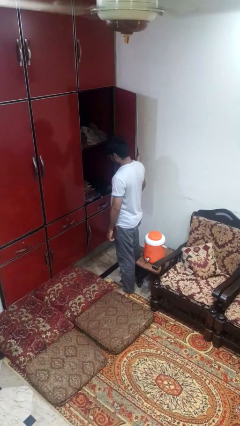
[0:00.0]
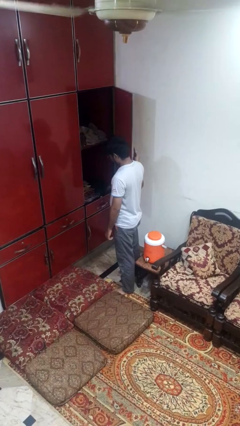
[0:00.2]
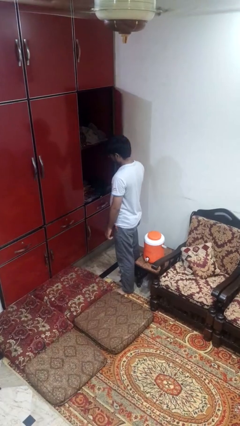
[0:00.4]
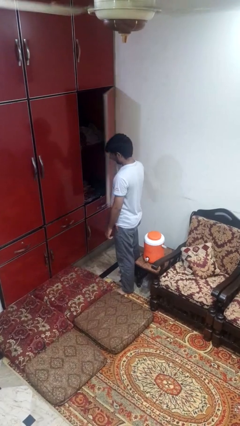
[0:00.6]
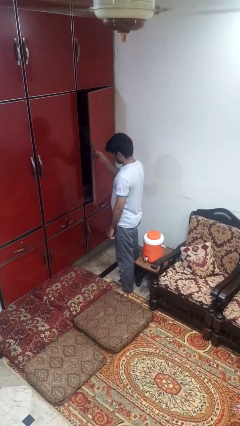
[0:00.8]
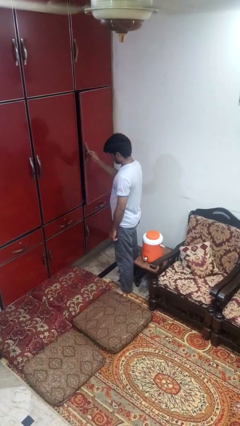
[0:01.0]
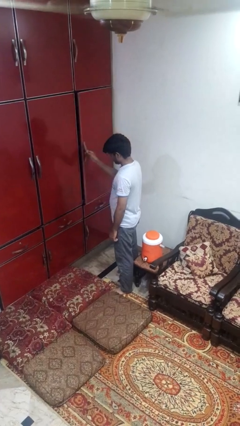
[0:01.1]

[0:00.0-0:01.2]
person closes cabinet

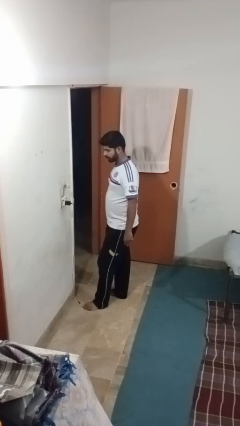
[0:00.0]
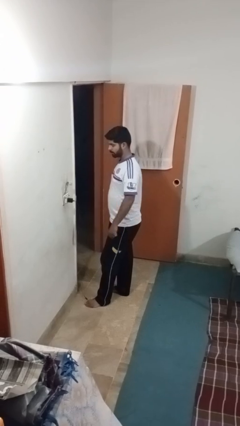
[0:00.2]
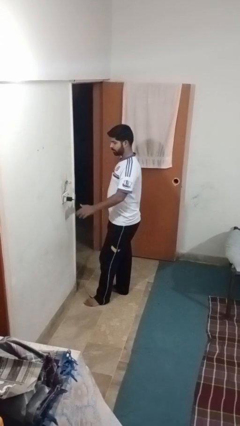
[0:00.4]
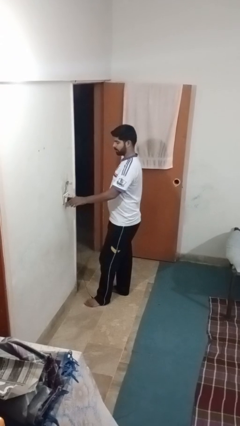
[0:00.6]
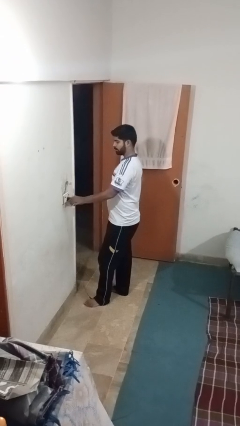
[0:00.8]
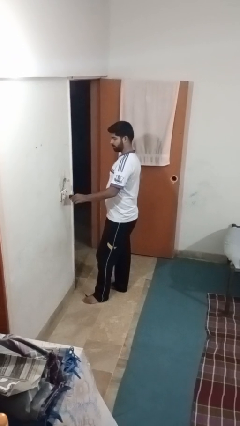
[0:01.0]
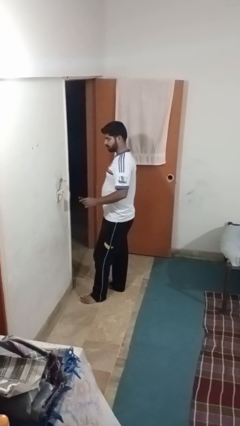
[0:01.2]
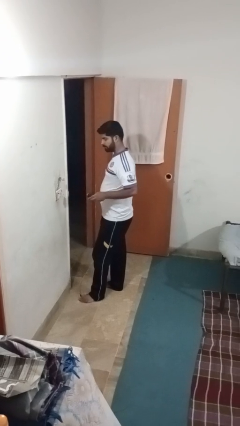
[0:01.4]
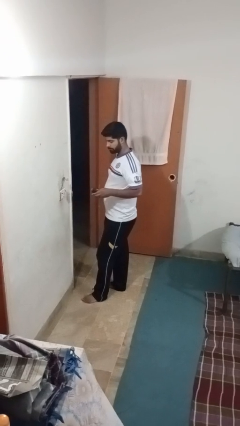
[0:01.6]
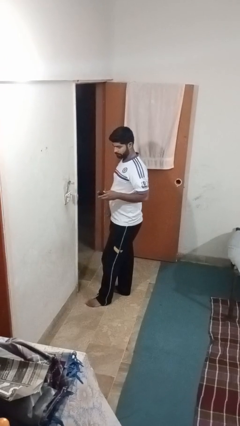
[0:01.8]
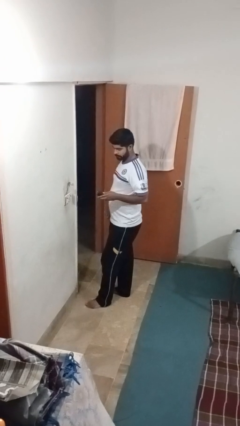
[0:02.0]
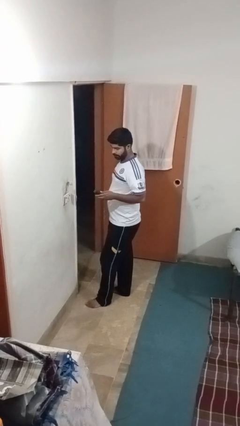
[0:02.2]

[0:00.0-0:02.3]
person unplugs from electrical socket

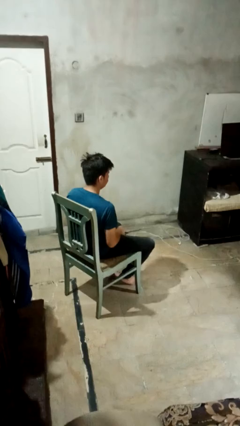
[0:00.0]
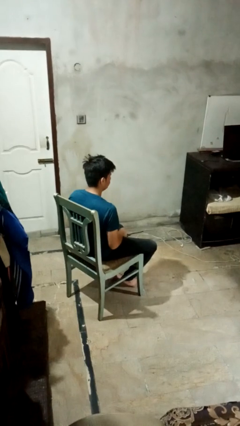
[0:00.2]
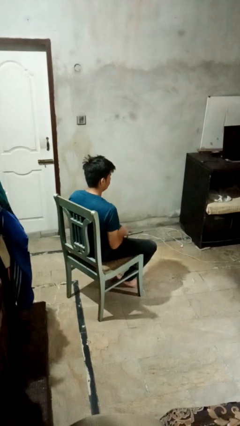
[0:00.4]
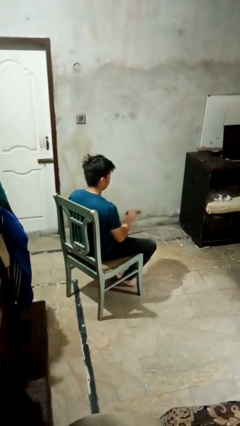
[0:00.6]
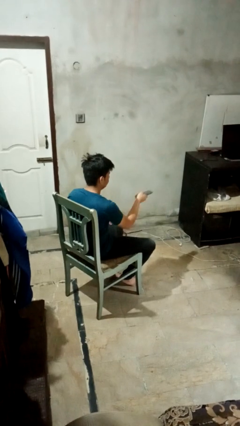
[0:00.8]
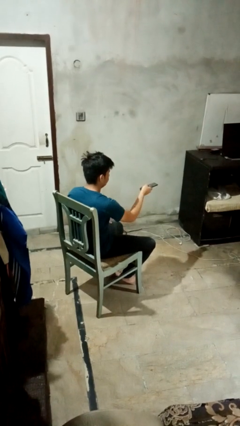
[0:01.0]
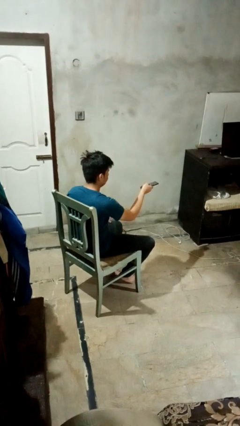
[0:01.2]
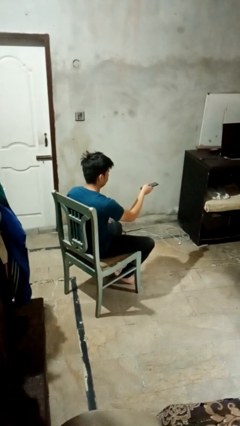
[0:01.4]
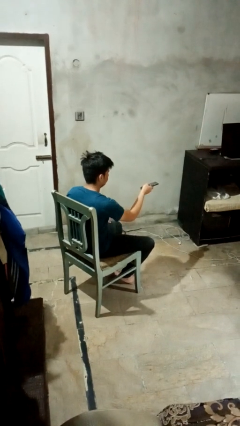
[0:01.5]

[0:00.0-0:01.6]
person uses television remote

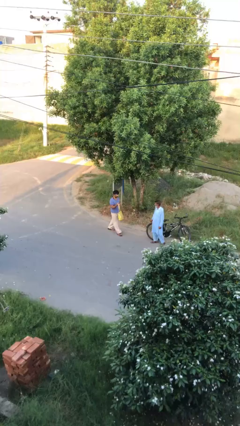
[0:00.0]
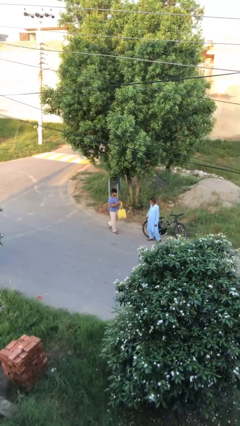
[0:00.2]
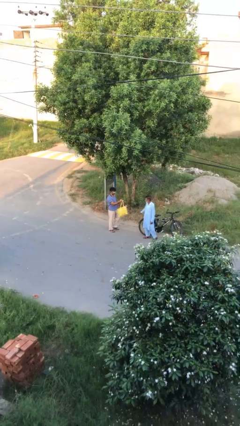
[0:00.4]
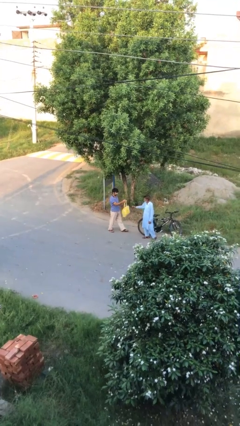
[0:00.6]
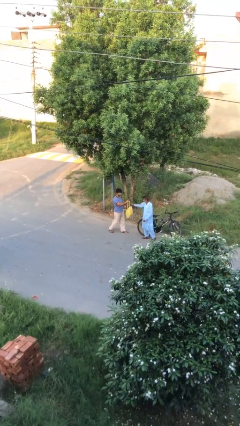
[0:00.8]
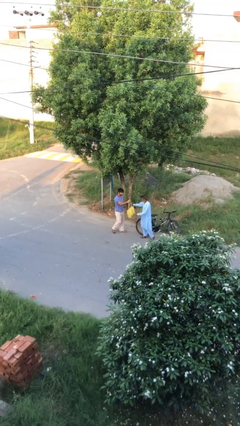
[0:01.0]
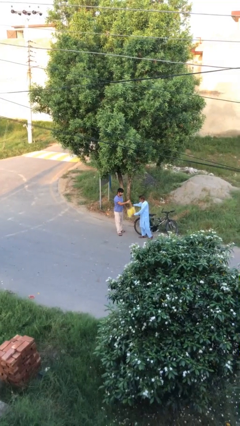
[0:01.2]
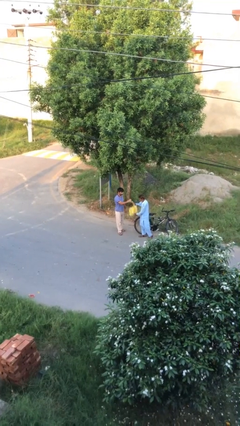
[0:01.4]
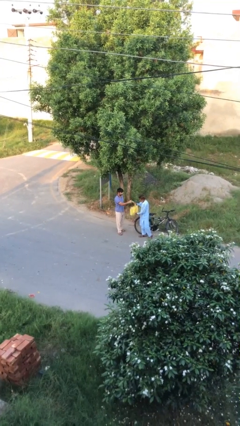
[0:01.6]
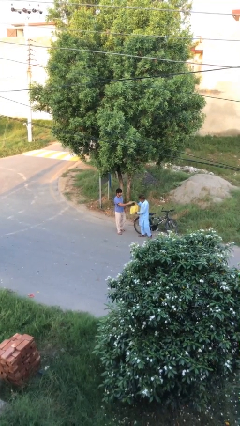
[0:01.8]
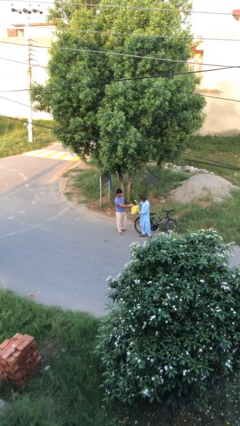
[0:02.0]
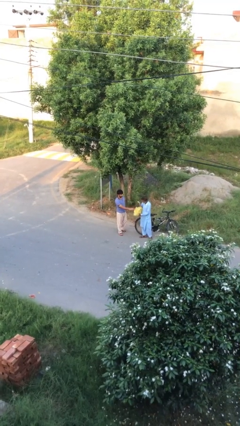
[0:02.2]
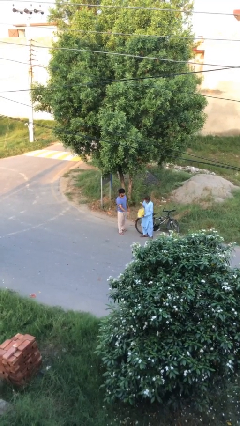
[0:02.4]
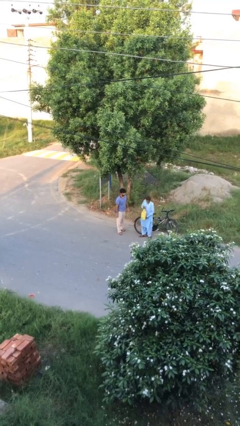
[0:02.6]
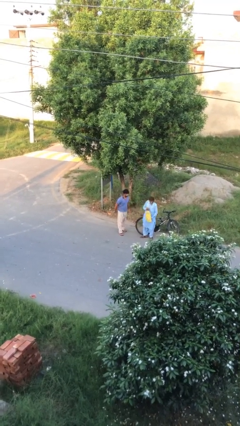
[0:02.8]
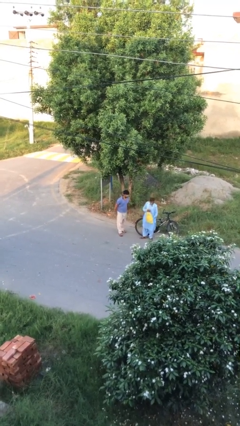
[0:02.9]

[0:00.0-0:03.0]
person transfers object to person

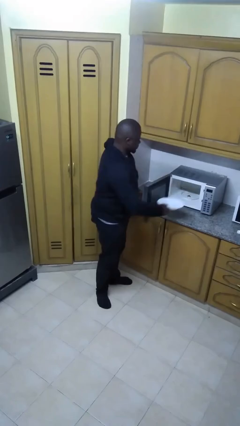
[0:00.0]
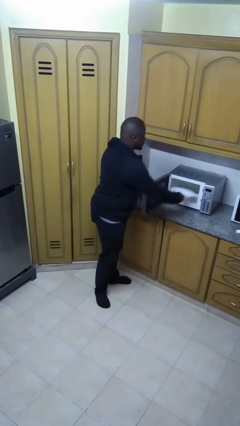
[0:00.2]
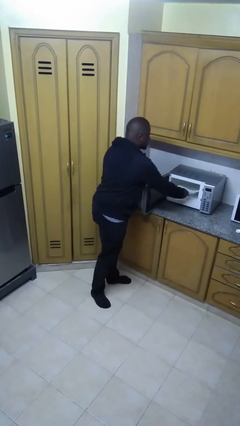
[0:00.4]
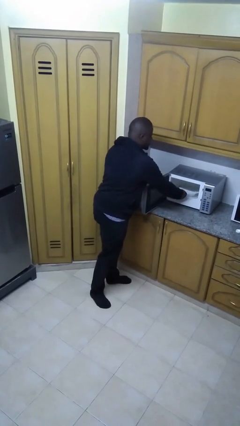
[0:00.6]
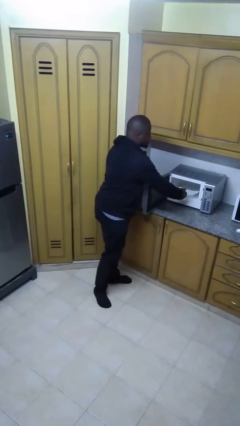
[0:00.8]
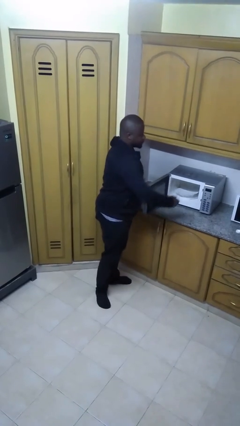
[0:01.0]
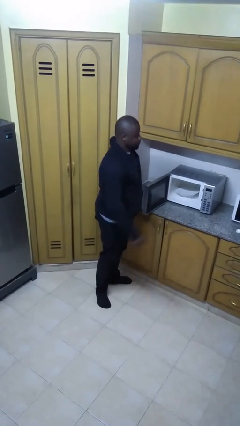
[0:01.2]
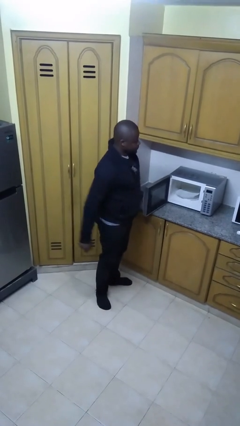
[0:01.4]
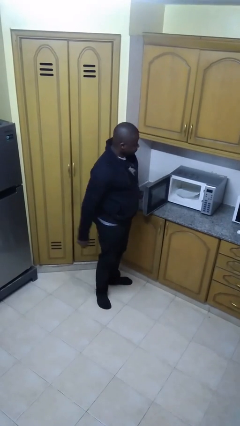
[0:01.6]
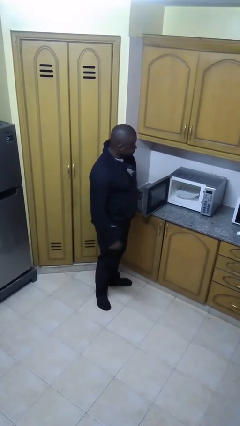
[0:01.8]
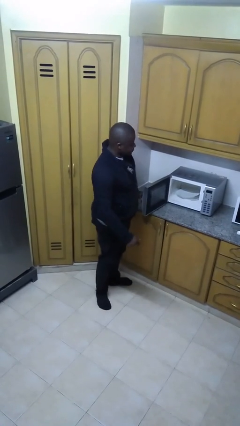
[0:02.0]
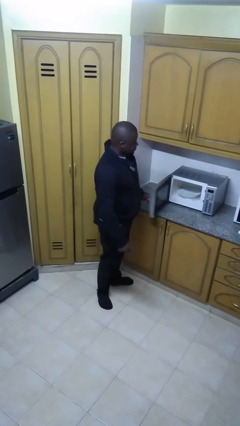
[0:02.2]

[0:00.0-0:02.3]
person puts object into microwave

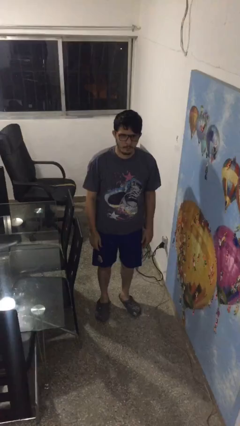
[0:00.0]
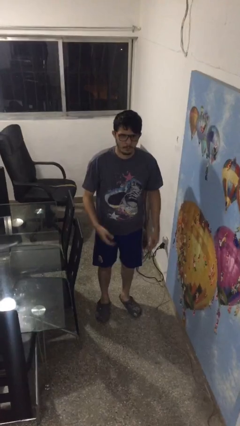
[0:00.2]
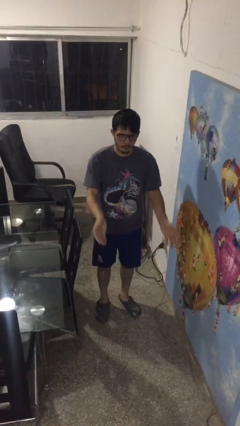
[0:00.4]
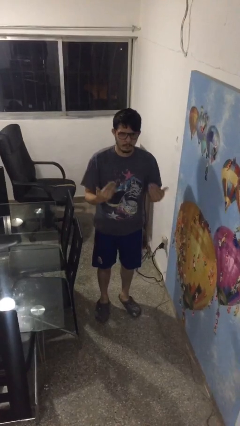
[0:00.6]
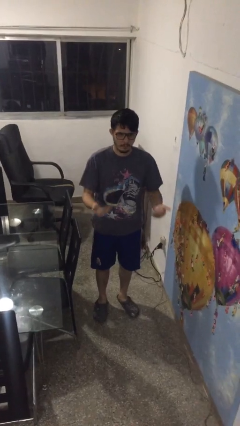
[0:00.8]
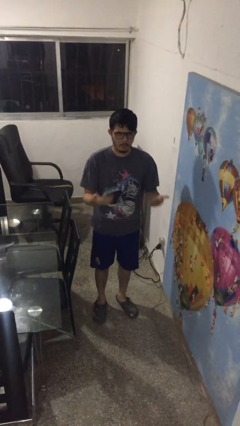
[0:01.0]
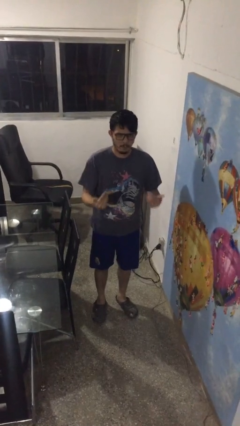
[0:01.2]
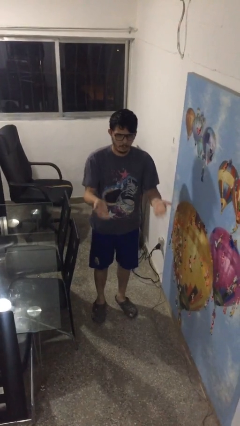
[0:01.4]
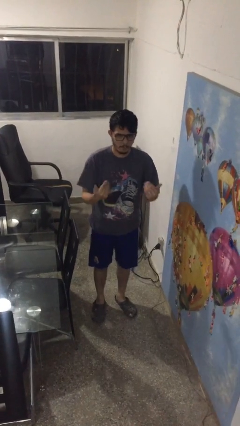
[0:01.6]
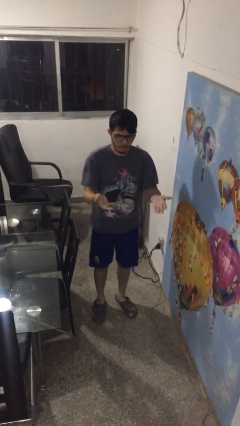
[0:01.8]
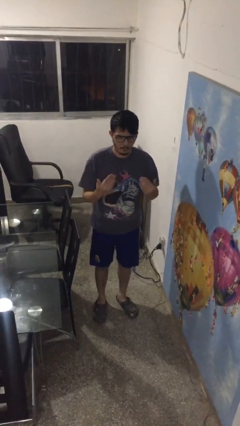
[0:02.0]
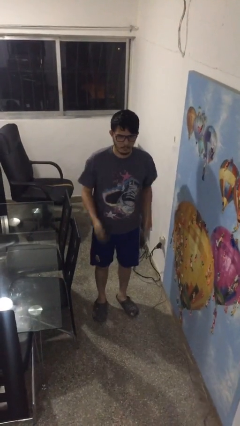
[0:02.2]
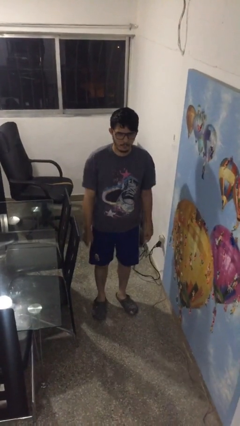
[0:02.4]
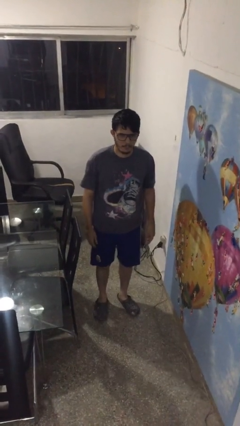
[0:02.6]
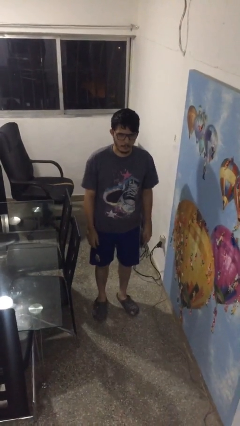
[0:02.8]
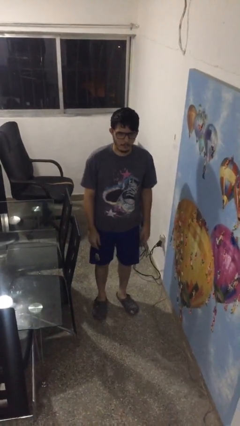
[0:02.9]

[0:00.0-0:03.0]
person gestures come here

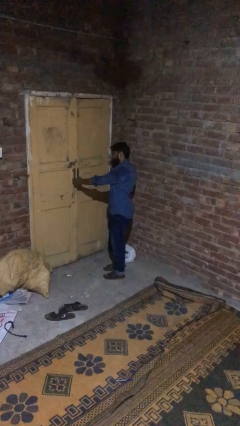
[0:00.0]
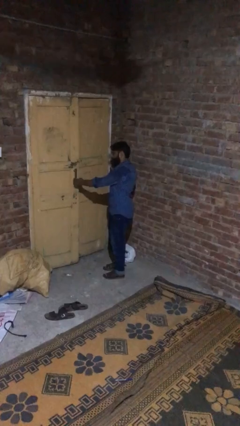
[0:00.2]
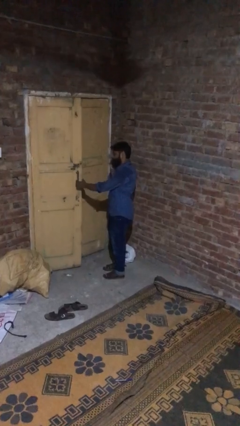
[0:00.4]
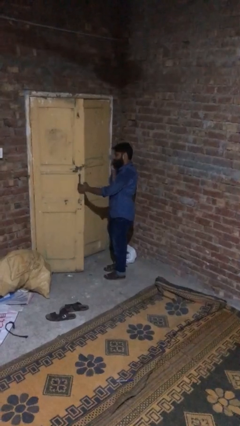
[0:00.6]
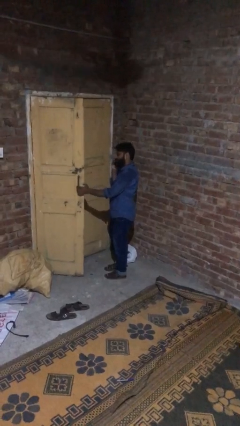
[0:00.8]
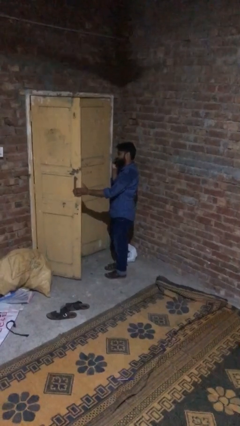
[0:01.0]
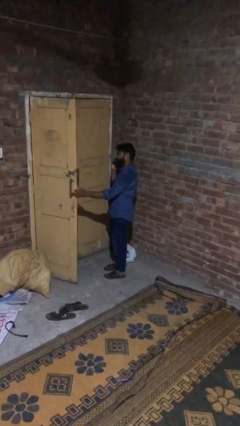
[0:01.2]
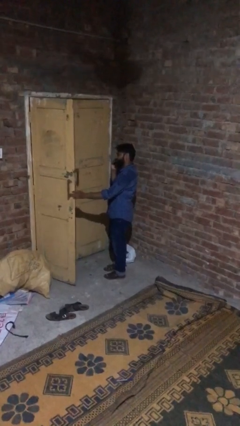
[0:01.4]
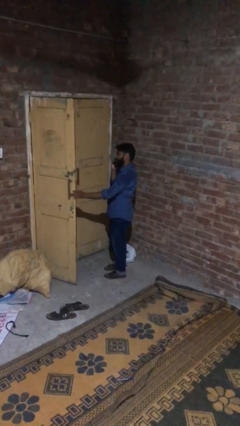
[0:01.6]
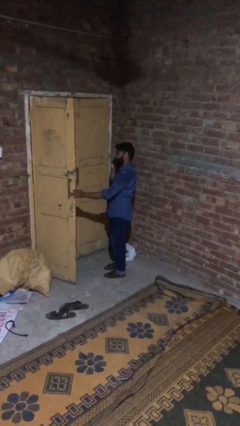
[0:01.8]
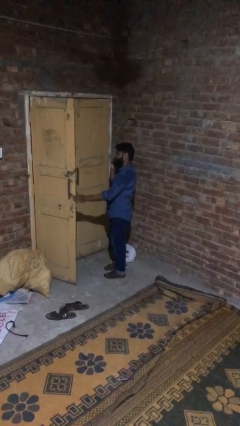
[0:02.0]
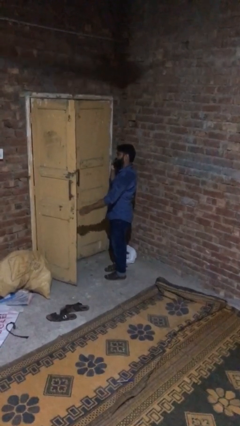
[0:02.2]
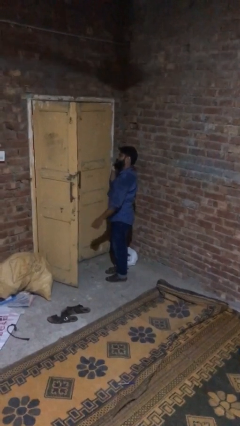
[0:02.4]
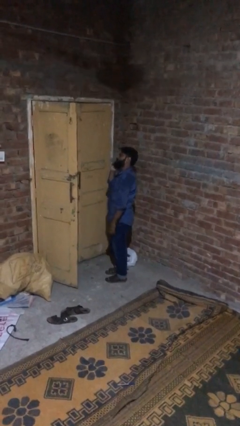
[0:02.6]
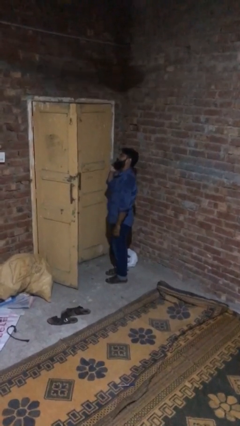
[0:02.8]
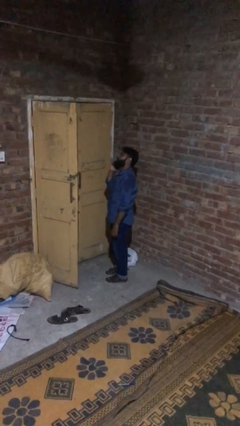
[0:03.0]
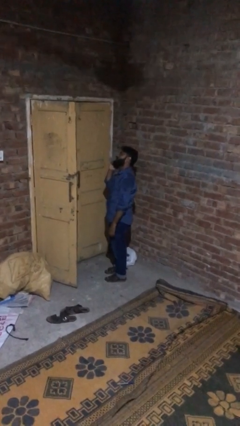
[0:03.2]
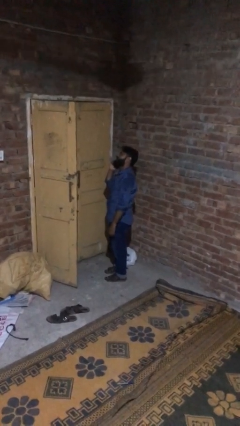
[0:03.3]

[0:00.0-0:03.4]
person opens facility door

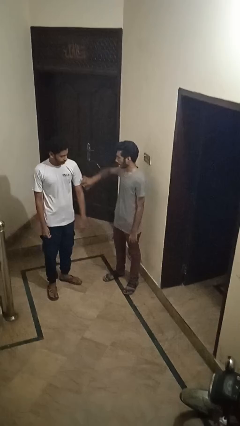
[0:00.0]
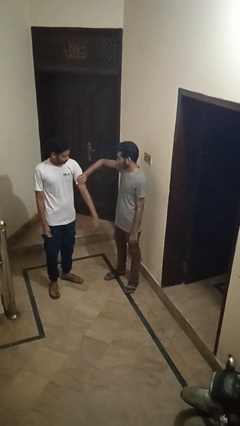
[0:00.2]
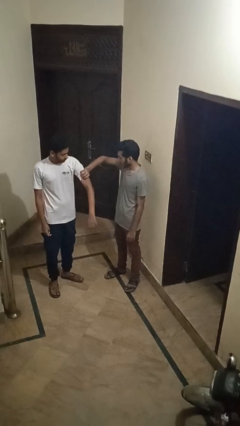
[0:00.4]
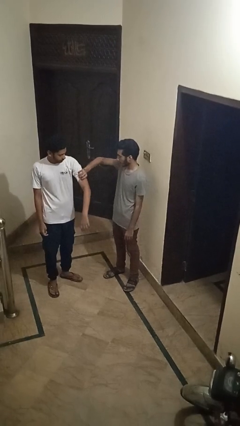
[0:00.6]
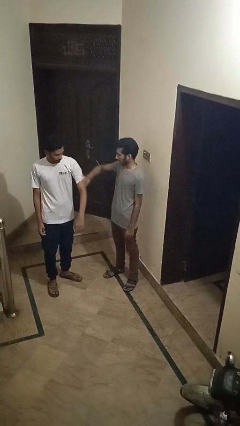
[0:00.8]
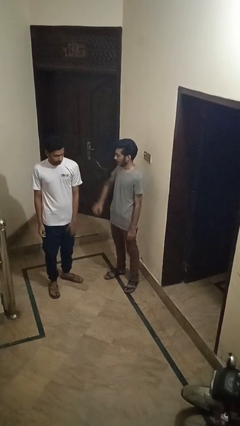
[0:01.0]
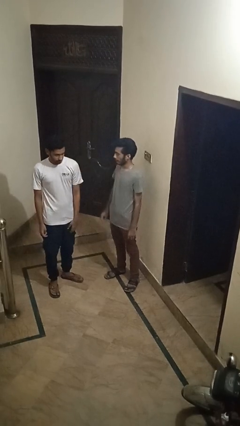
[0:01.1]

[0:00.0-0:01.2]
person grabs person by bicep
